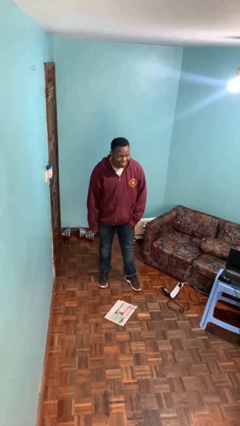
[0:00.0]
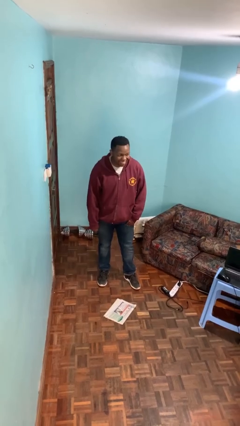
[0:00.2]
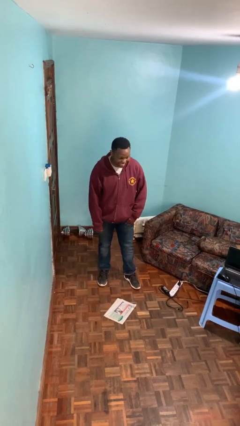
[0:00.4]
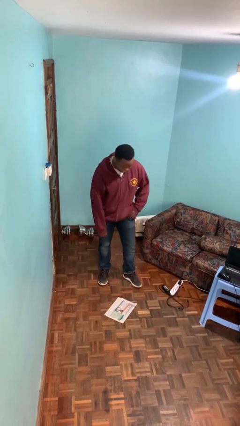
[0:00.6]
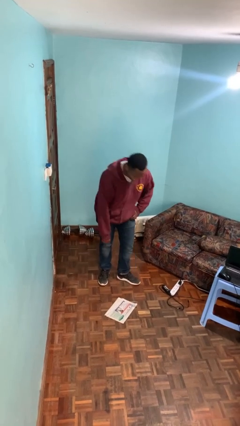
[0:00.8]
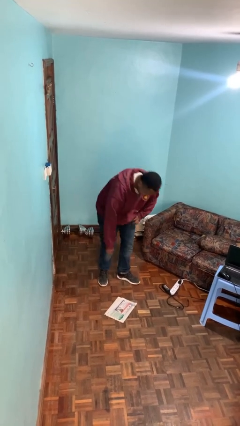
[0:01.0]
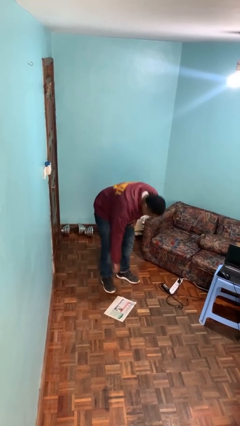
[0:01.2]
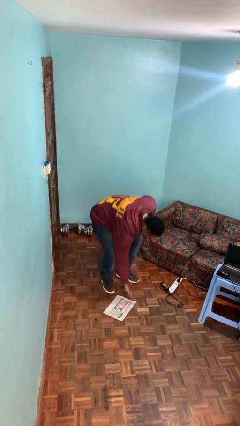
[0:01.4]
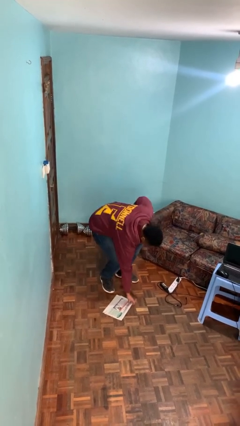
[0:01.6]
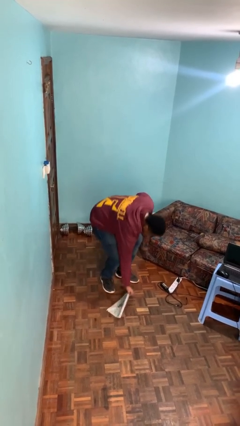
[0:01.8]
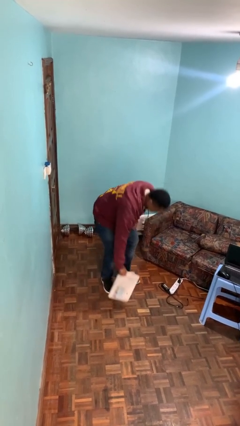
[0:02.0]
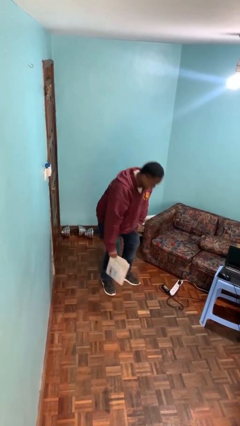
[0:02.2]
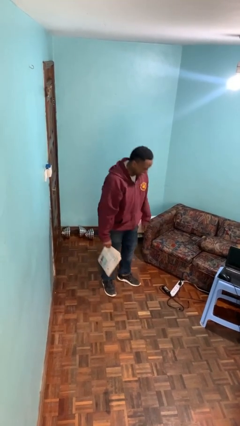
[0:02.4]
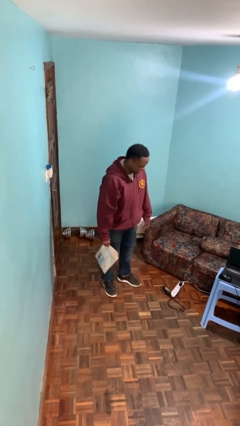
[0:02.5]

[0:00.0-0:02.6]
person picks up object from floor

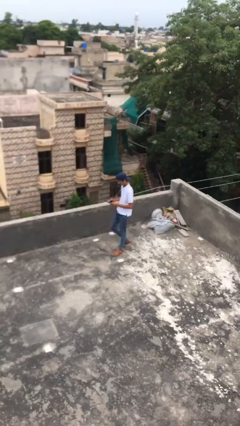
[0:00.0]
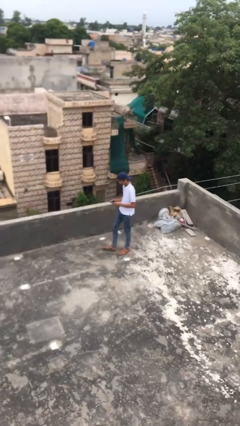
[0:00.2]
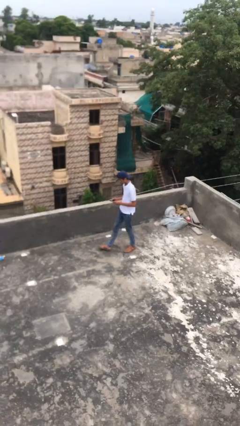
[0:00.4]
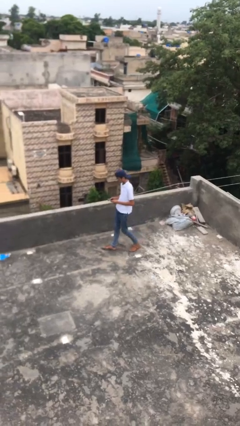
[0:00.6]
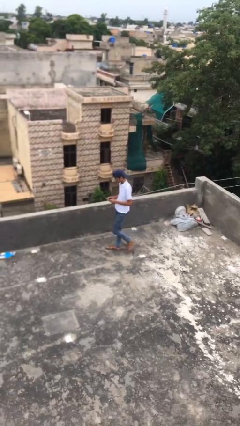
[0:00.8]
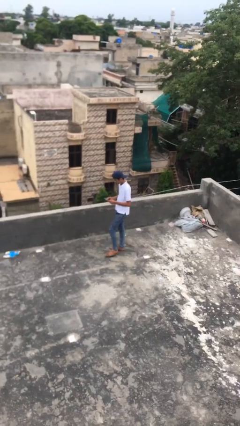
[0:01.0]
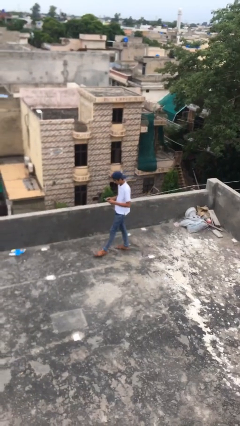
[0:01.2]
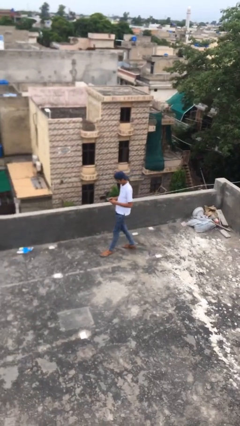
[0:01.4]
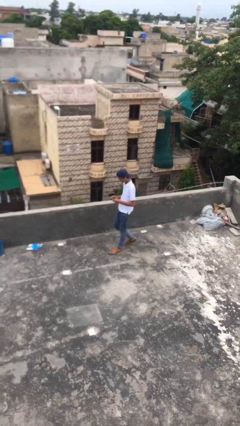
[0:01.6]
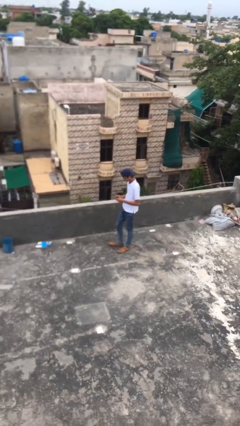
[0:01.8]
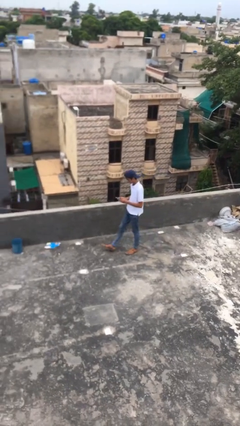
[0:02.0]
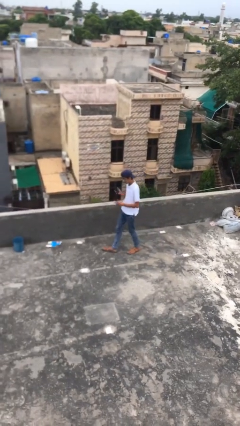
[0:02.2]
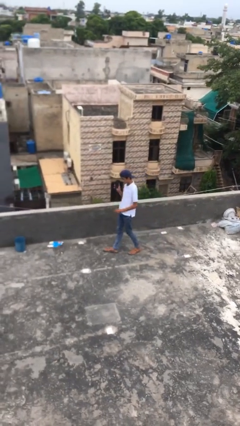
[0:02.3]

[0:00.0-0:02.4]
person texts on phone

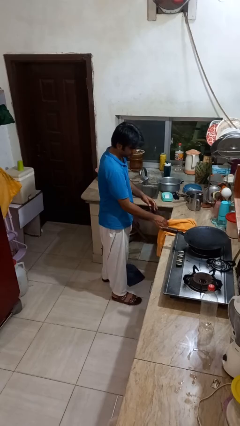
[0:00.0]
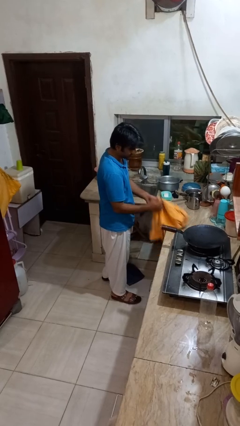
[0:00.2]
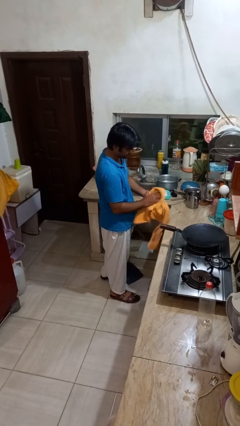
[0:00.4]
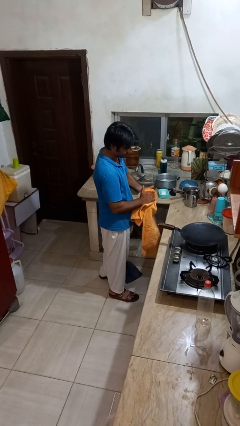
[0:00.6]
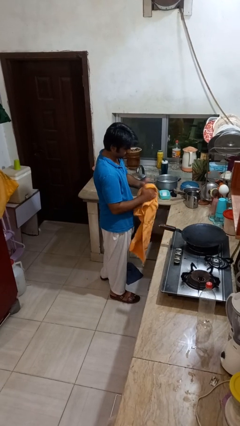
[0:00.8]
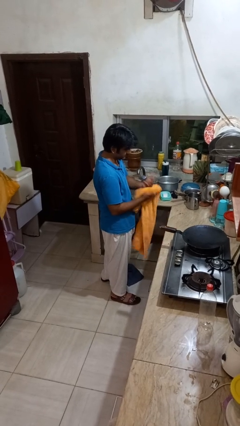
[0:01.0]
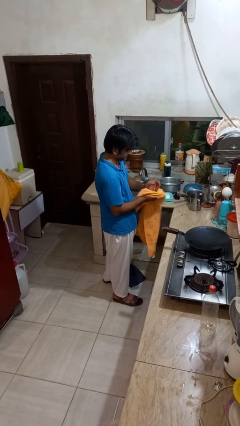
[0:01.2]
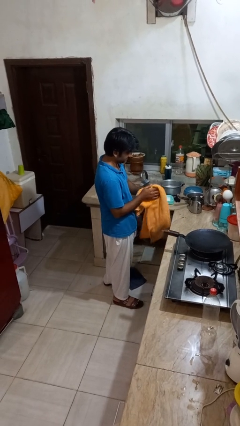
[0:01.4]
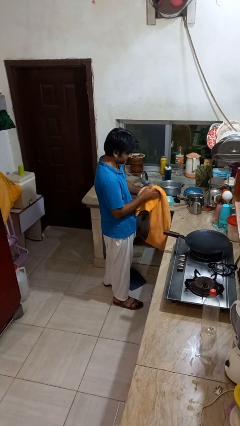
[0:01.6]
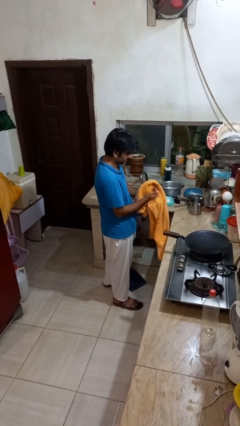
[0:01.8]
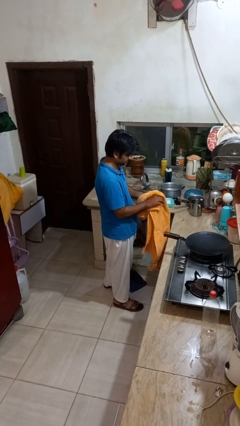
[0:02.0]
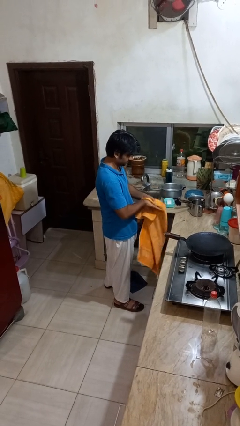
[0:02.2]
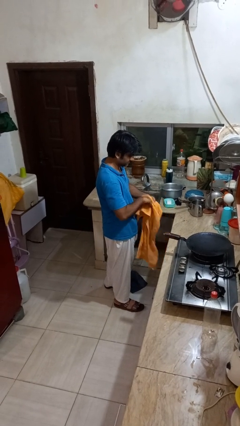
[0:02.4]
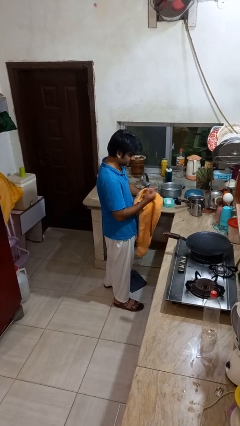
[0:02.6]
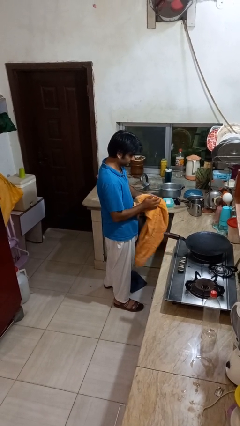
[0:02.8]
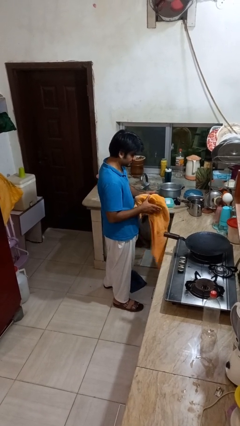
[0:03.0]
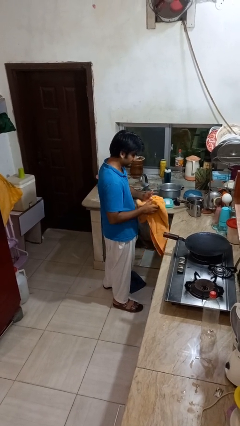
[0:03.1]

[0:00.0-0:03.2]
person dries hands with towel

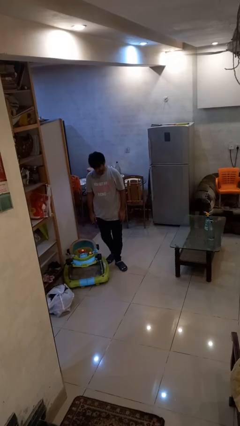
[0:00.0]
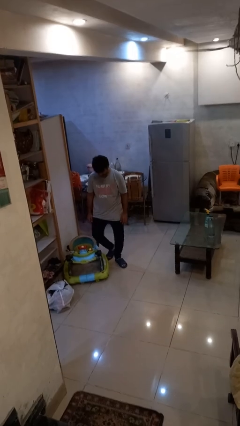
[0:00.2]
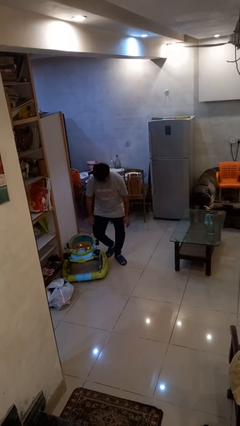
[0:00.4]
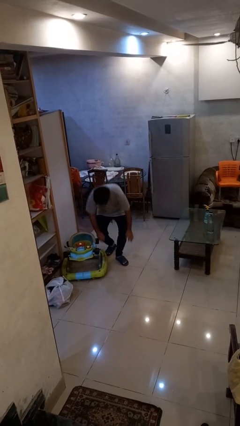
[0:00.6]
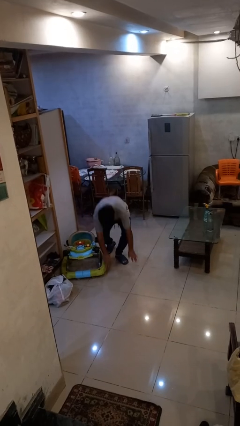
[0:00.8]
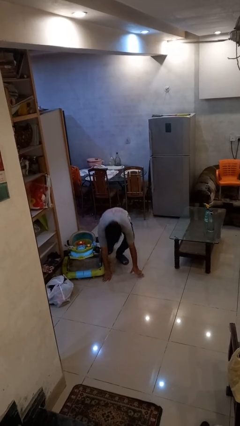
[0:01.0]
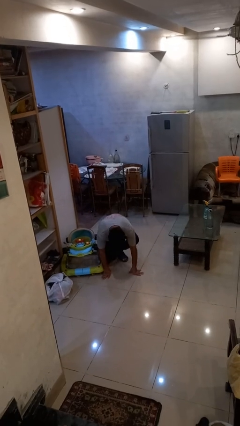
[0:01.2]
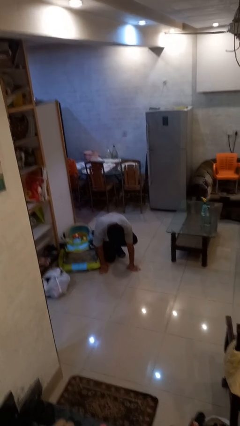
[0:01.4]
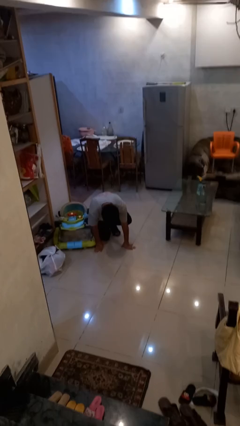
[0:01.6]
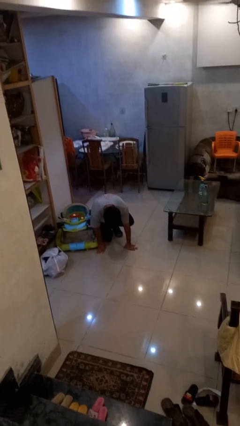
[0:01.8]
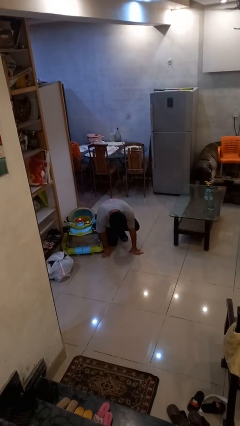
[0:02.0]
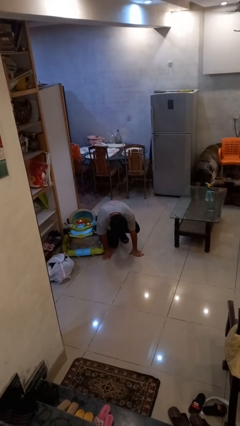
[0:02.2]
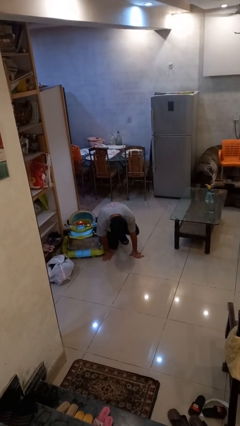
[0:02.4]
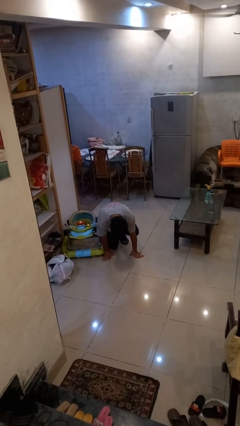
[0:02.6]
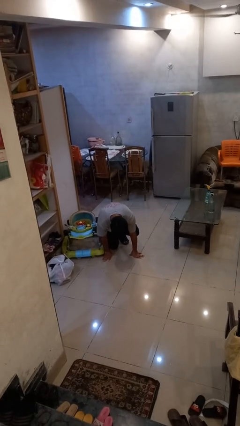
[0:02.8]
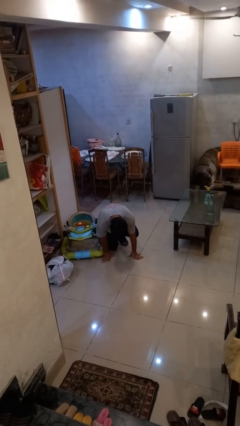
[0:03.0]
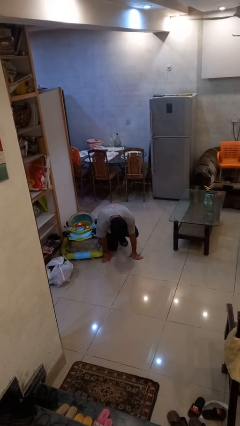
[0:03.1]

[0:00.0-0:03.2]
person trips on object on floor

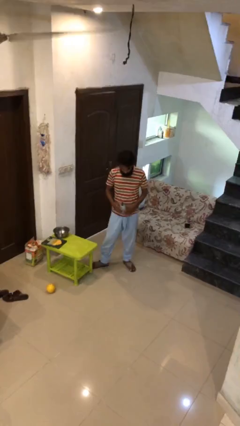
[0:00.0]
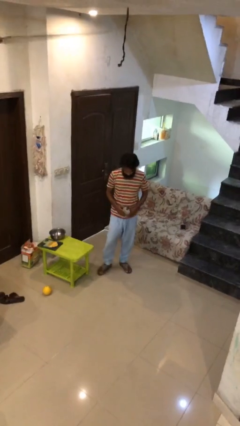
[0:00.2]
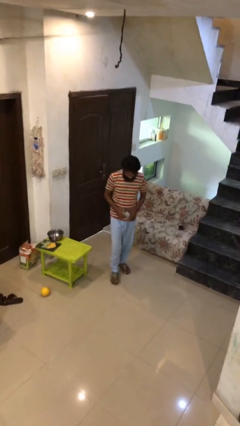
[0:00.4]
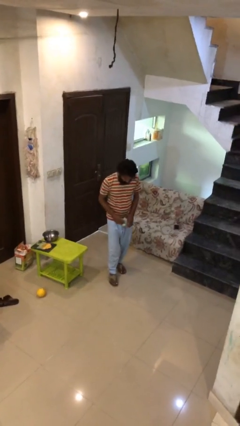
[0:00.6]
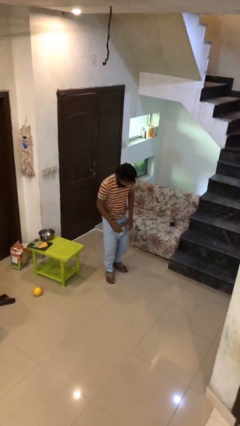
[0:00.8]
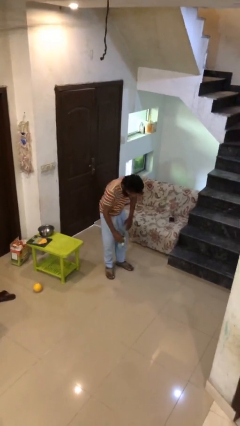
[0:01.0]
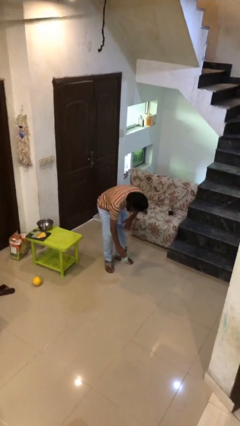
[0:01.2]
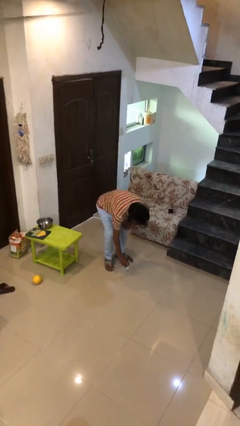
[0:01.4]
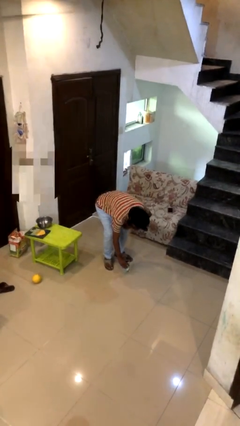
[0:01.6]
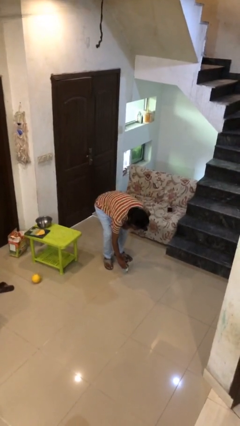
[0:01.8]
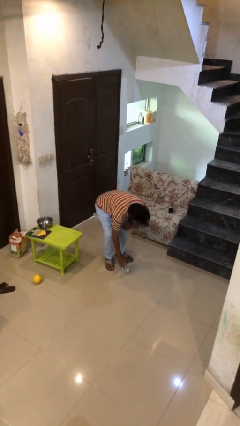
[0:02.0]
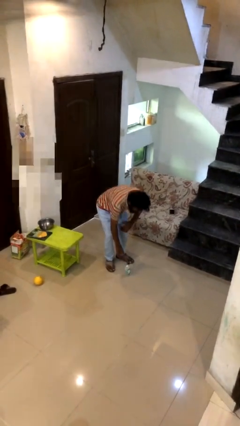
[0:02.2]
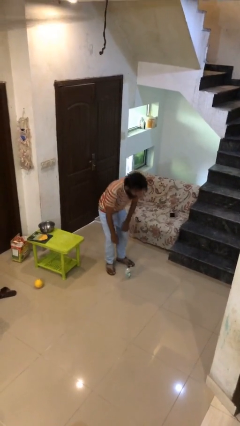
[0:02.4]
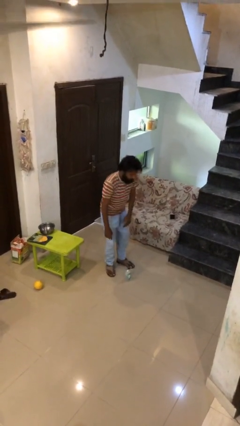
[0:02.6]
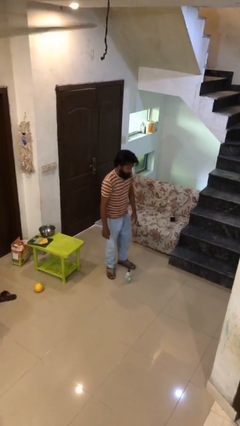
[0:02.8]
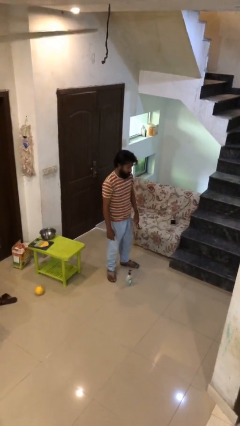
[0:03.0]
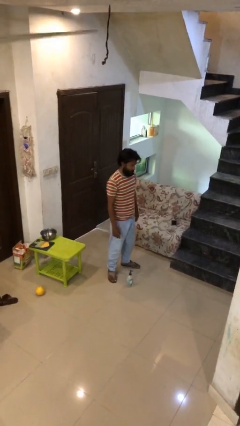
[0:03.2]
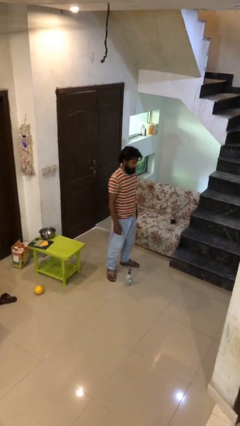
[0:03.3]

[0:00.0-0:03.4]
person puts down object on floor

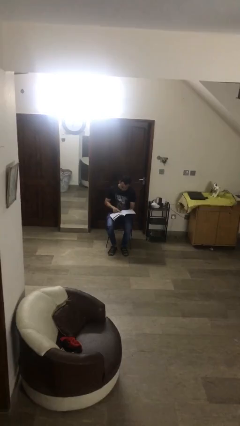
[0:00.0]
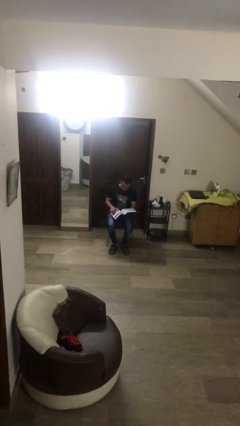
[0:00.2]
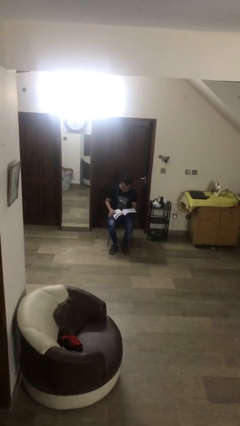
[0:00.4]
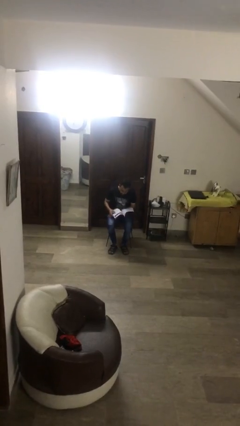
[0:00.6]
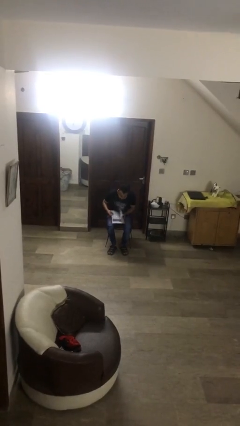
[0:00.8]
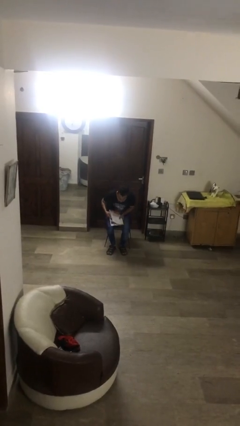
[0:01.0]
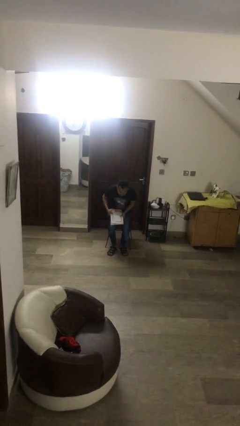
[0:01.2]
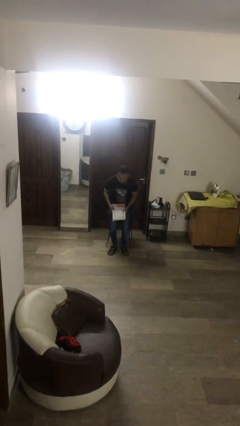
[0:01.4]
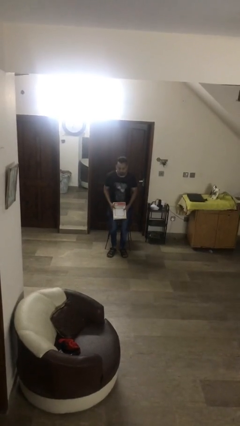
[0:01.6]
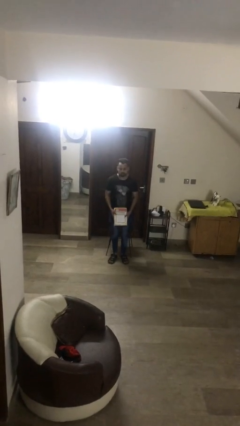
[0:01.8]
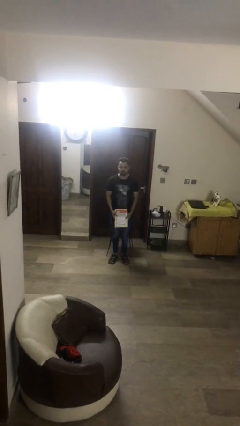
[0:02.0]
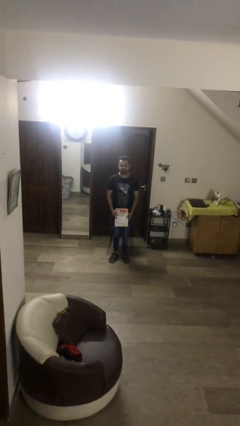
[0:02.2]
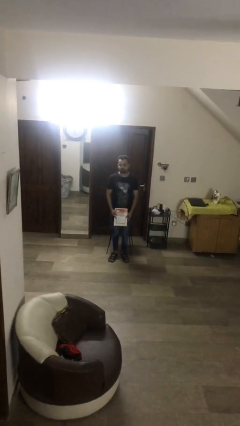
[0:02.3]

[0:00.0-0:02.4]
person stands up

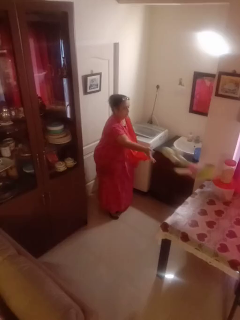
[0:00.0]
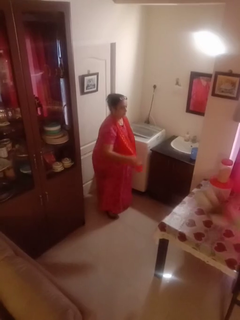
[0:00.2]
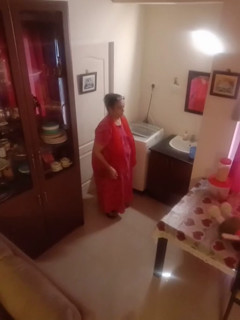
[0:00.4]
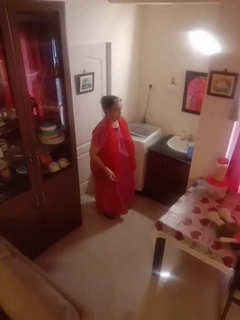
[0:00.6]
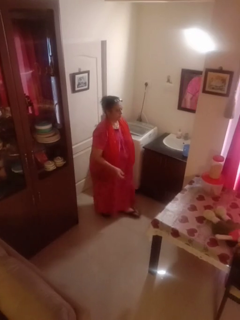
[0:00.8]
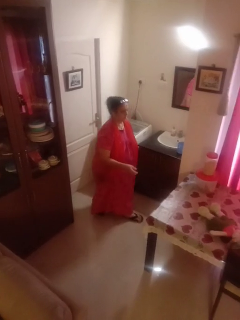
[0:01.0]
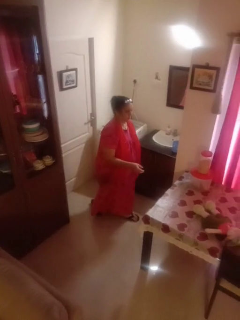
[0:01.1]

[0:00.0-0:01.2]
person throws object on table
